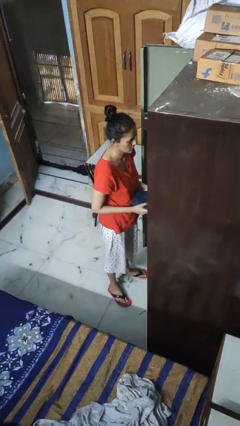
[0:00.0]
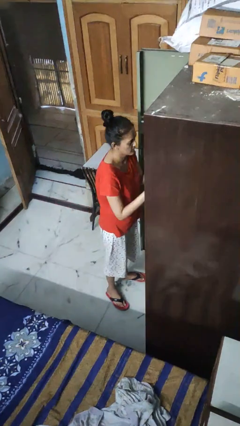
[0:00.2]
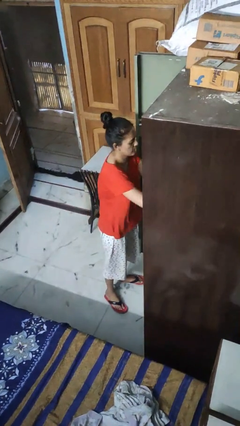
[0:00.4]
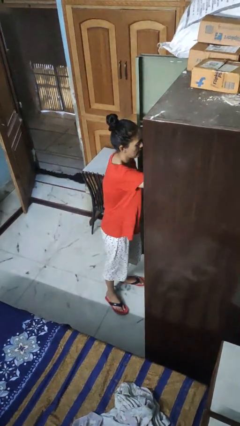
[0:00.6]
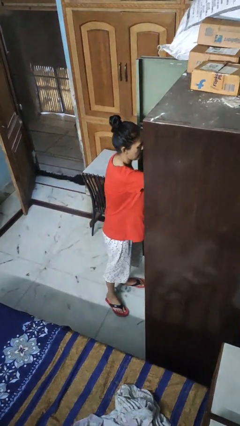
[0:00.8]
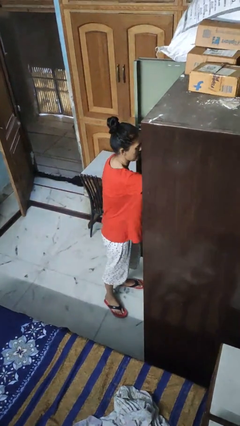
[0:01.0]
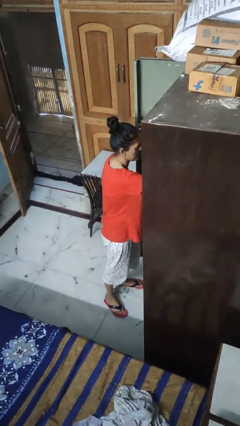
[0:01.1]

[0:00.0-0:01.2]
person puts clothes into dresser

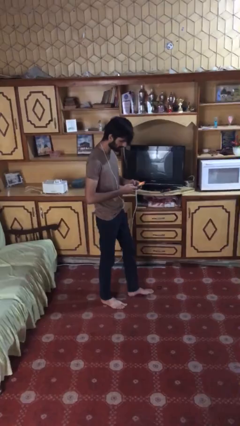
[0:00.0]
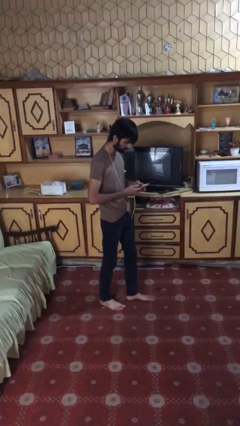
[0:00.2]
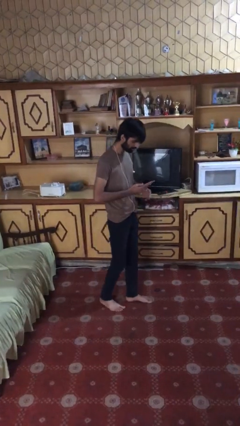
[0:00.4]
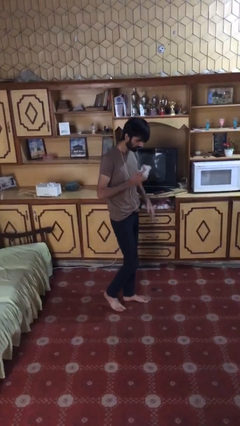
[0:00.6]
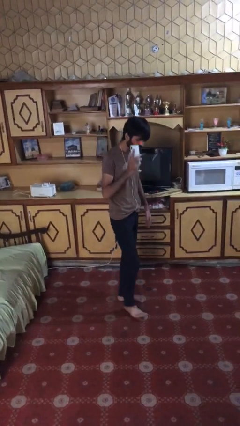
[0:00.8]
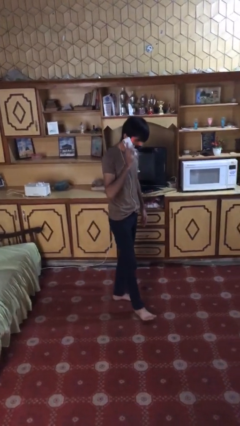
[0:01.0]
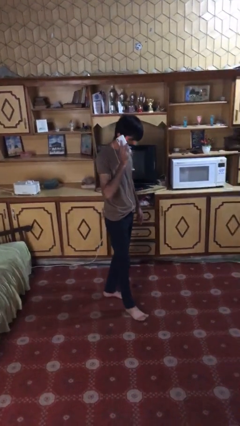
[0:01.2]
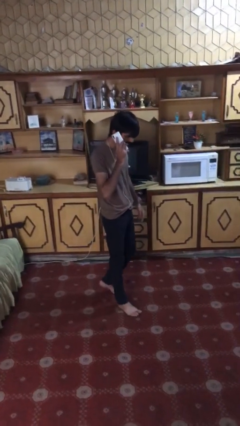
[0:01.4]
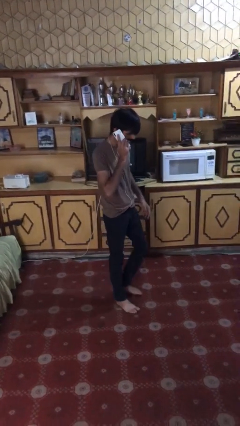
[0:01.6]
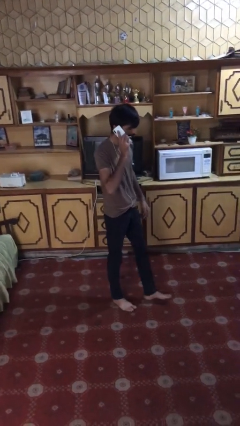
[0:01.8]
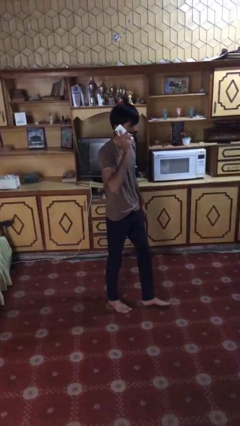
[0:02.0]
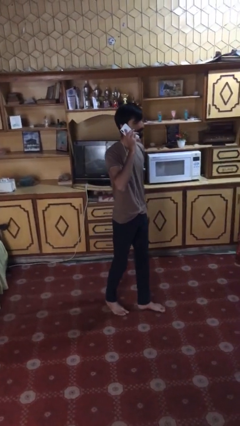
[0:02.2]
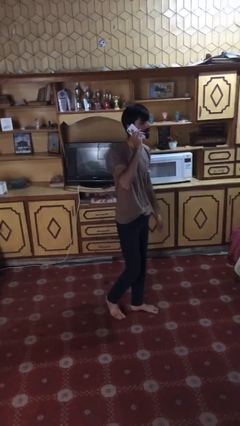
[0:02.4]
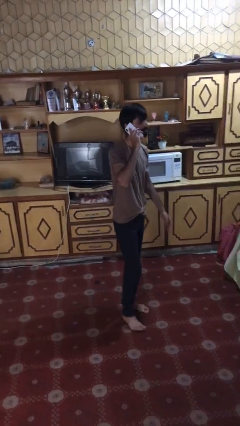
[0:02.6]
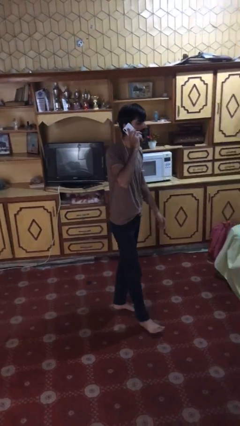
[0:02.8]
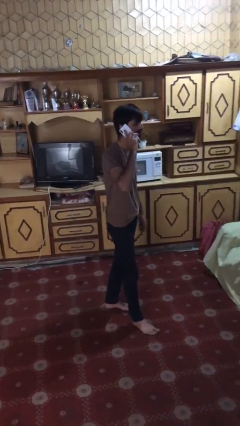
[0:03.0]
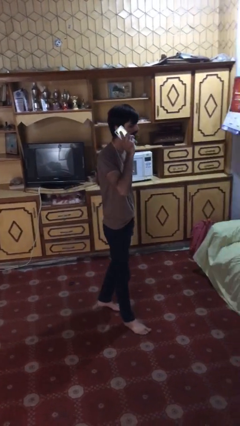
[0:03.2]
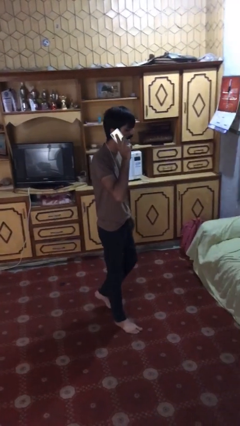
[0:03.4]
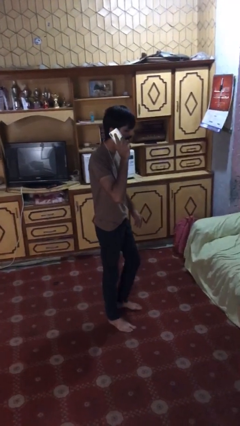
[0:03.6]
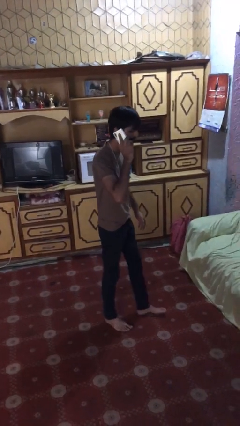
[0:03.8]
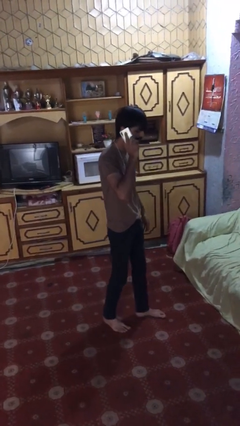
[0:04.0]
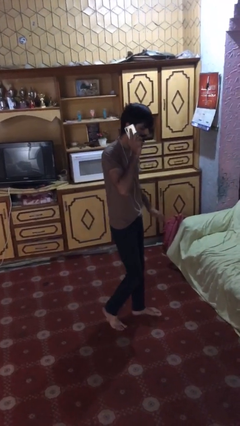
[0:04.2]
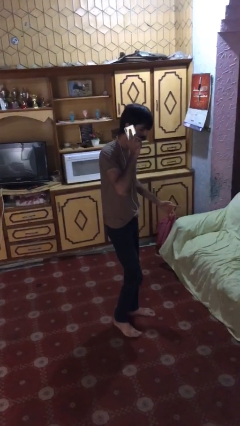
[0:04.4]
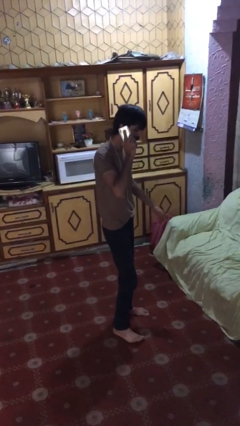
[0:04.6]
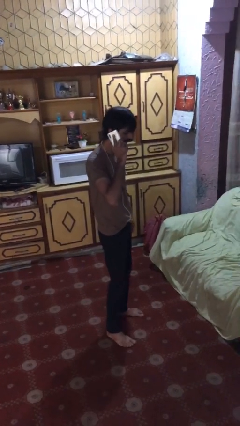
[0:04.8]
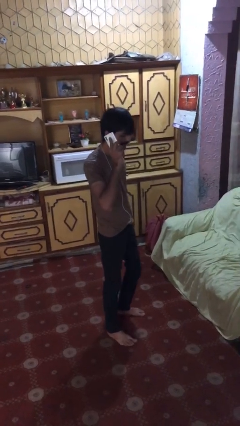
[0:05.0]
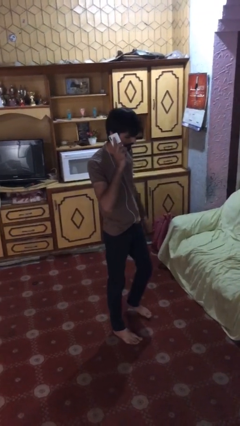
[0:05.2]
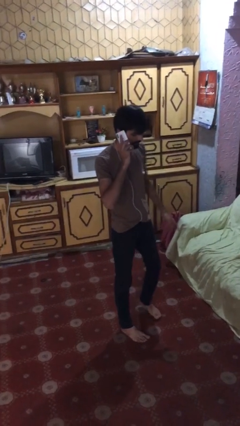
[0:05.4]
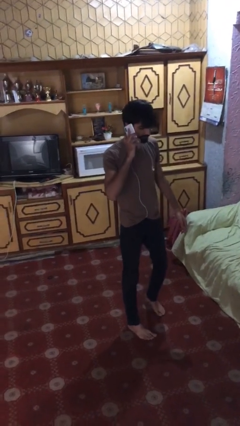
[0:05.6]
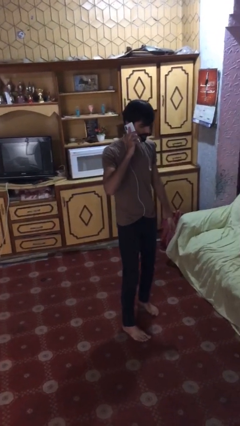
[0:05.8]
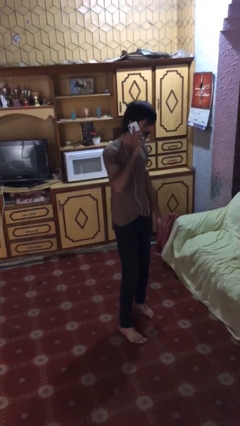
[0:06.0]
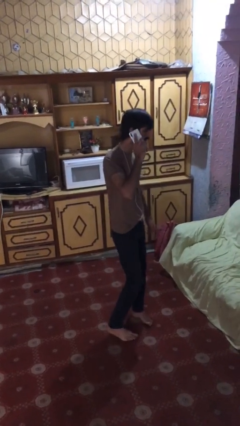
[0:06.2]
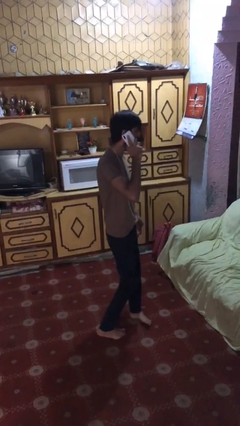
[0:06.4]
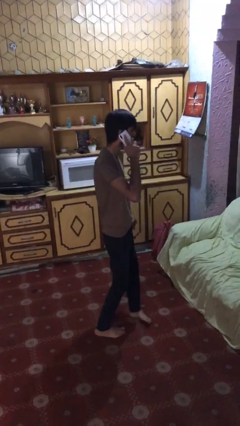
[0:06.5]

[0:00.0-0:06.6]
person talks on phone

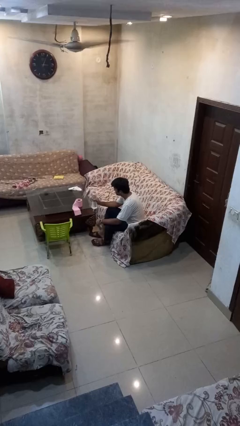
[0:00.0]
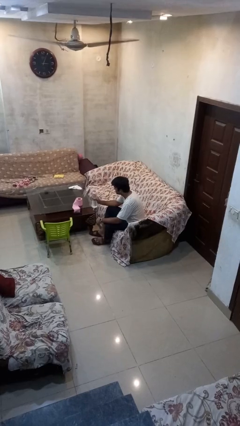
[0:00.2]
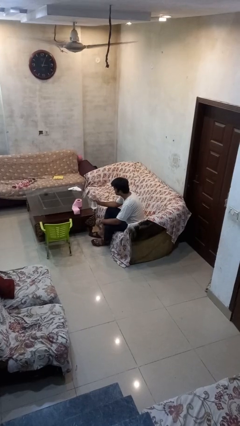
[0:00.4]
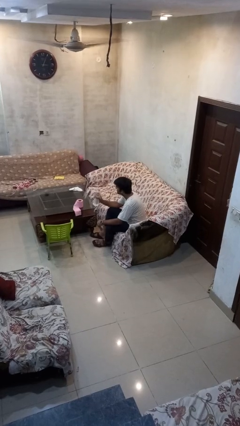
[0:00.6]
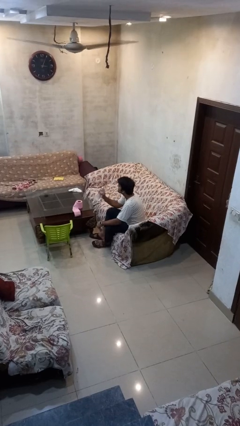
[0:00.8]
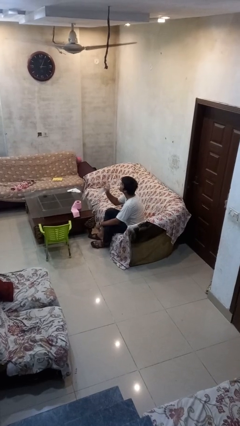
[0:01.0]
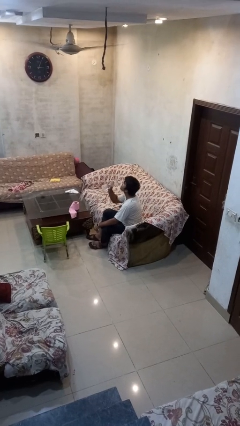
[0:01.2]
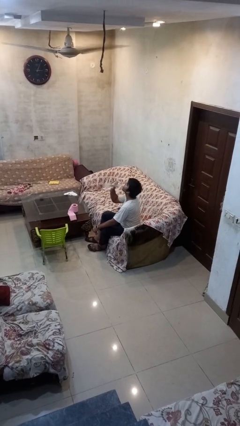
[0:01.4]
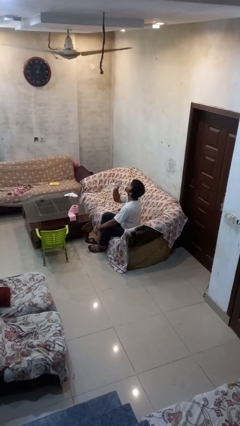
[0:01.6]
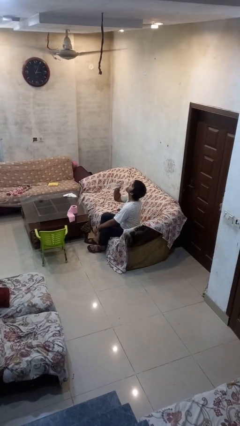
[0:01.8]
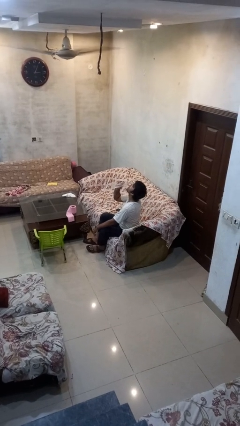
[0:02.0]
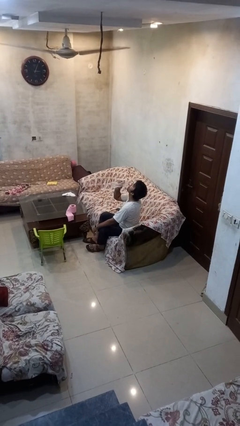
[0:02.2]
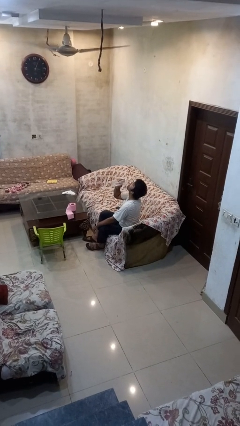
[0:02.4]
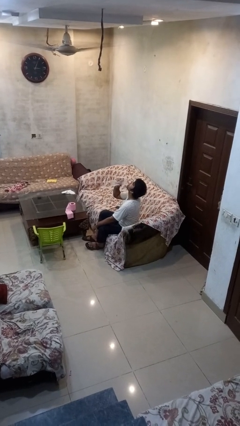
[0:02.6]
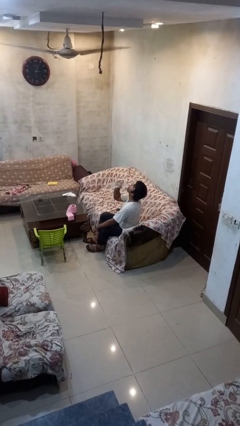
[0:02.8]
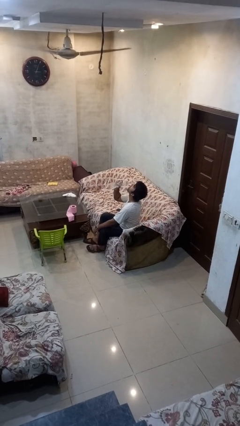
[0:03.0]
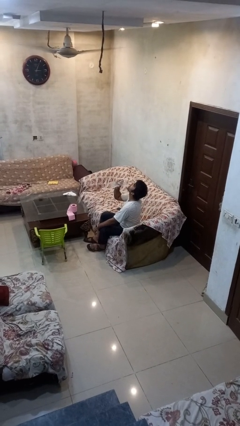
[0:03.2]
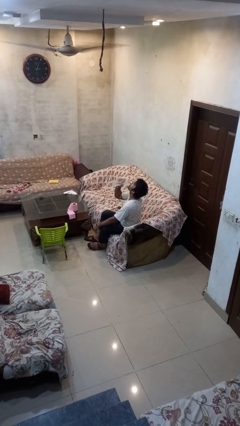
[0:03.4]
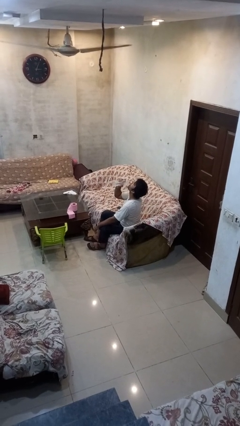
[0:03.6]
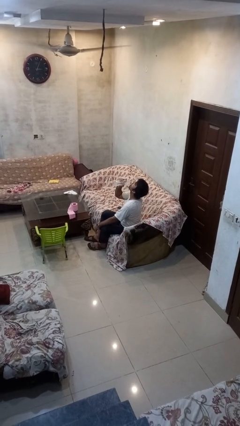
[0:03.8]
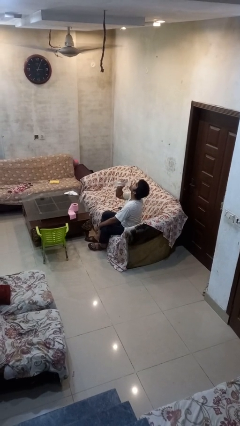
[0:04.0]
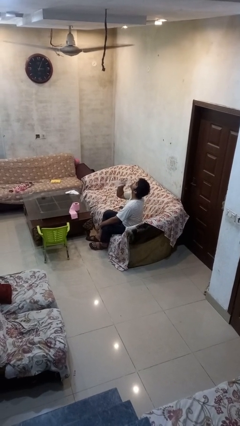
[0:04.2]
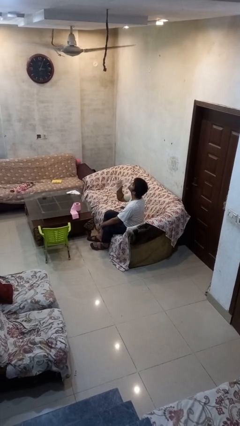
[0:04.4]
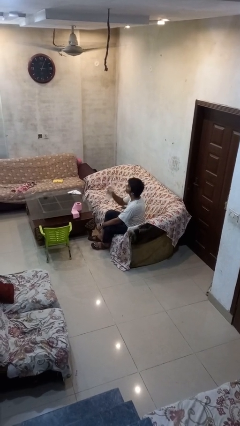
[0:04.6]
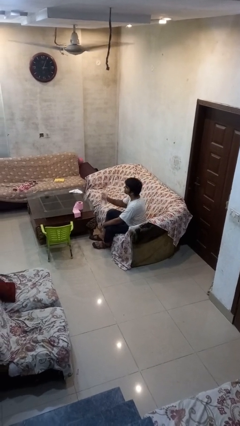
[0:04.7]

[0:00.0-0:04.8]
person drinks from bottle

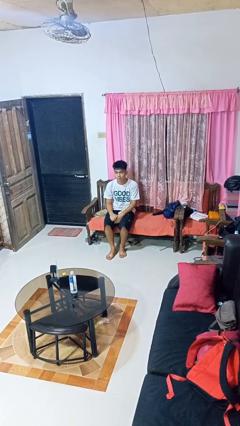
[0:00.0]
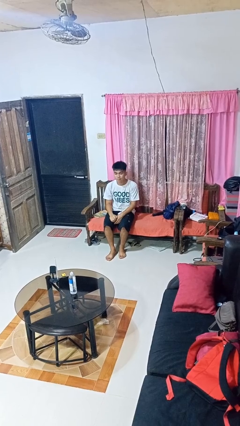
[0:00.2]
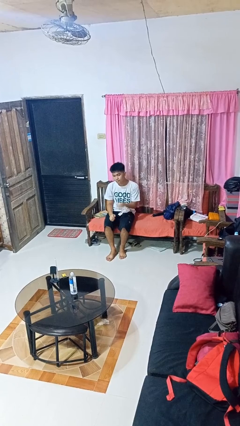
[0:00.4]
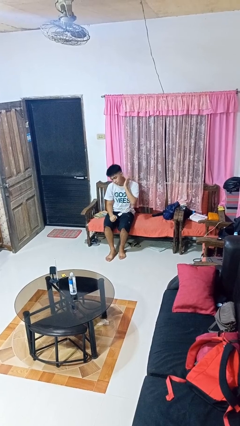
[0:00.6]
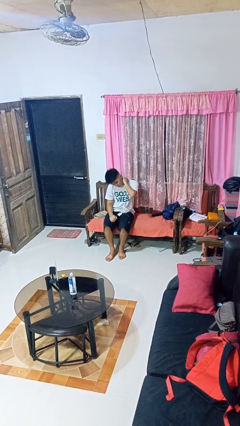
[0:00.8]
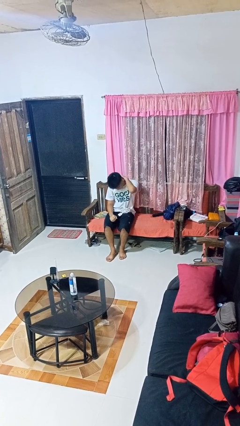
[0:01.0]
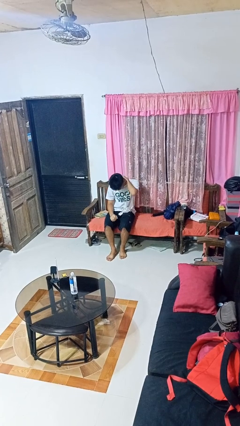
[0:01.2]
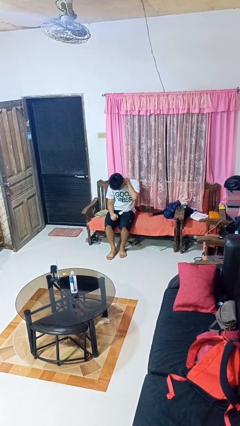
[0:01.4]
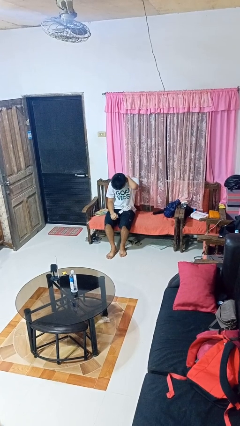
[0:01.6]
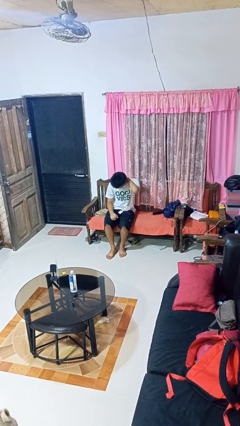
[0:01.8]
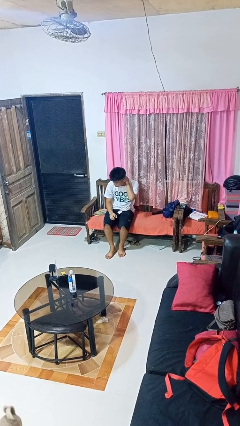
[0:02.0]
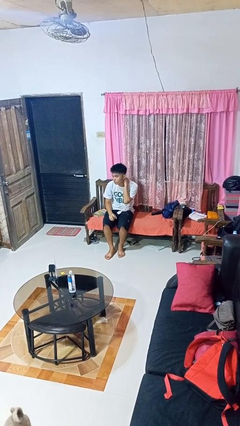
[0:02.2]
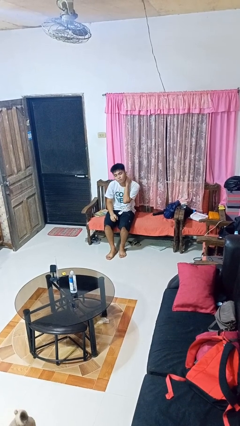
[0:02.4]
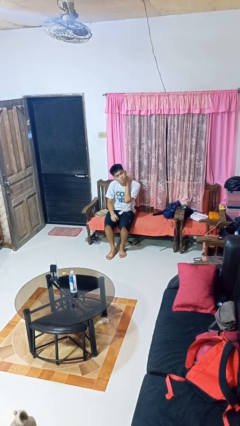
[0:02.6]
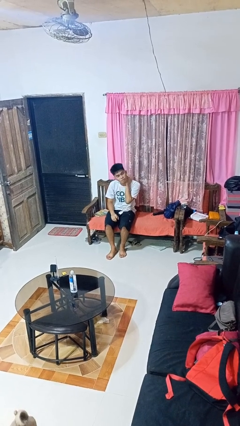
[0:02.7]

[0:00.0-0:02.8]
person rubs neck

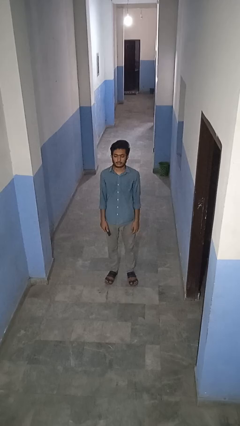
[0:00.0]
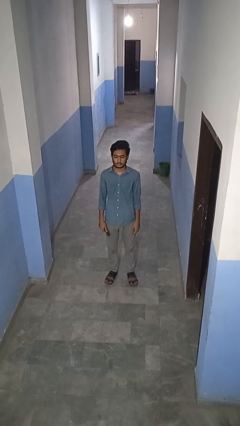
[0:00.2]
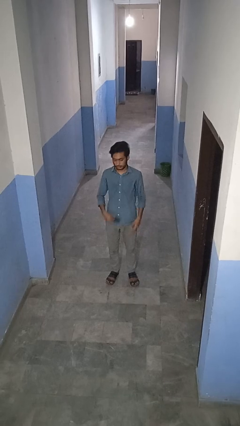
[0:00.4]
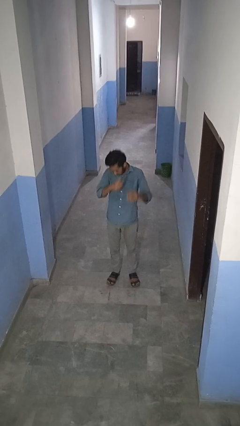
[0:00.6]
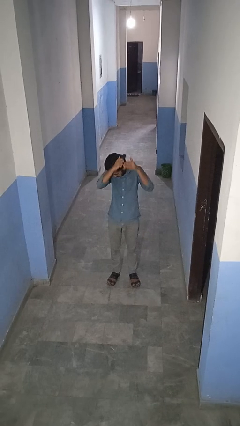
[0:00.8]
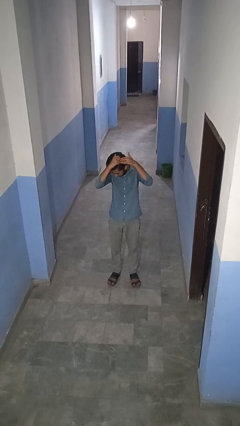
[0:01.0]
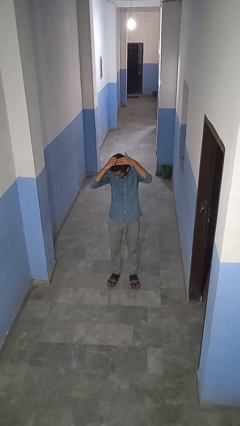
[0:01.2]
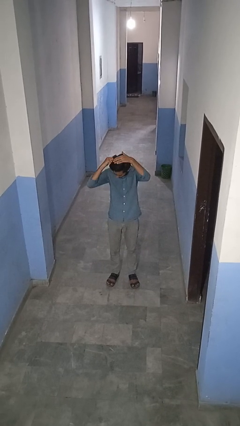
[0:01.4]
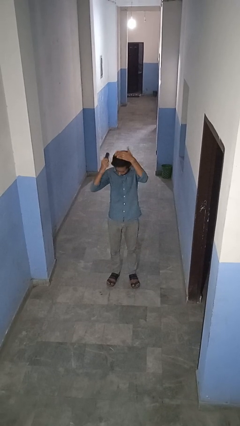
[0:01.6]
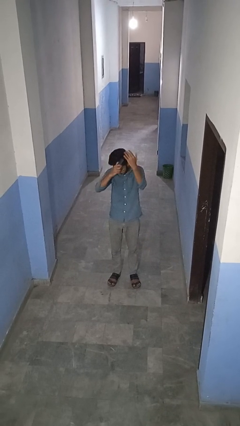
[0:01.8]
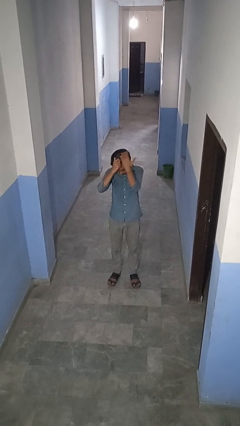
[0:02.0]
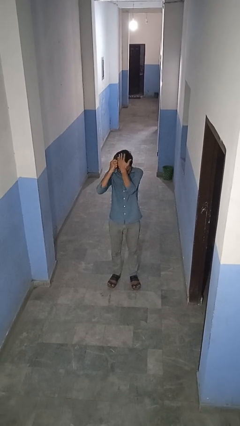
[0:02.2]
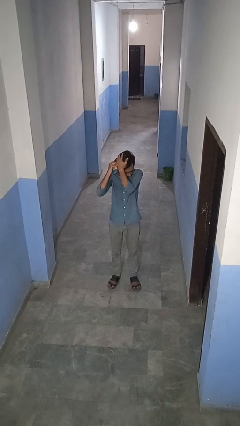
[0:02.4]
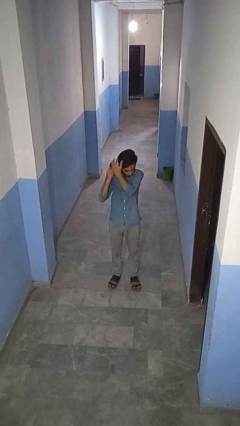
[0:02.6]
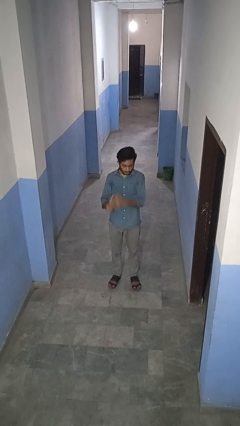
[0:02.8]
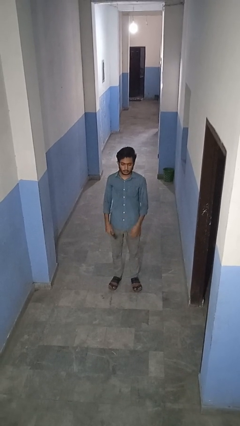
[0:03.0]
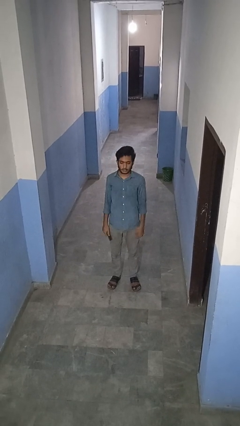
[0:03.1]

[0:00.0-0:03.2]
person brushes hair
